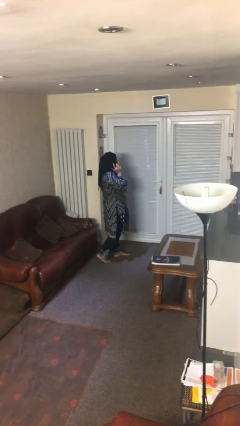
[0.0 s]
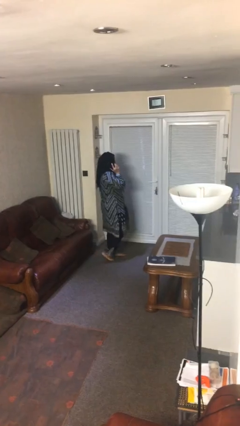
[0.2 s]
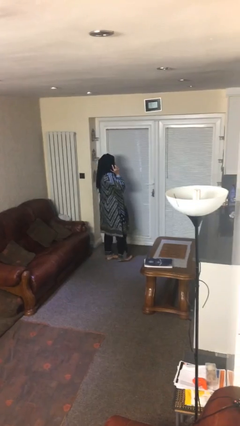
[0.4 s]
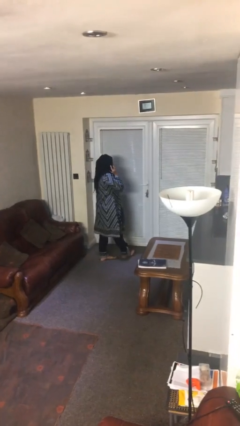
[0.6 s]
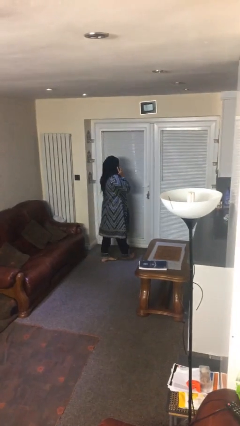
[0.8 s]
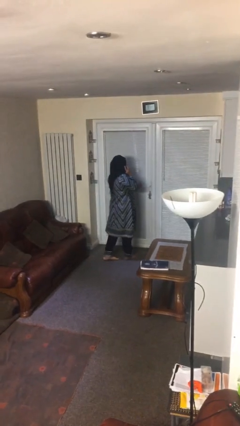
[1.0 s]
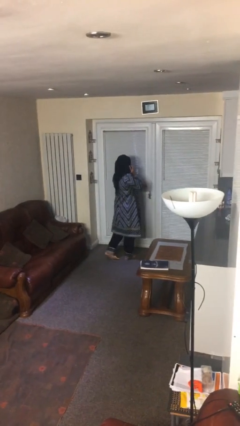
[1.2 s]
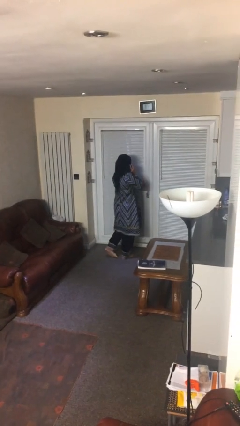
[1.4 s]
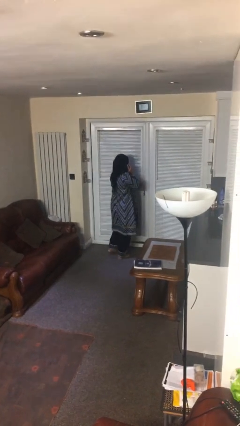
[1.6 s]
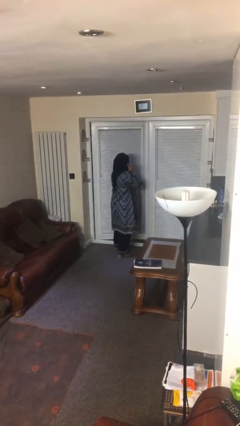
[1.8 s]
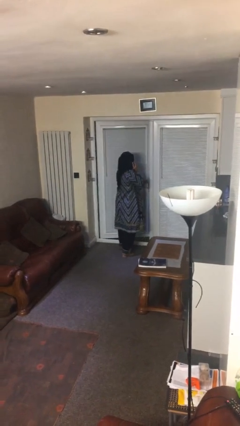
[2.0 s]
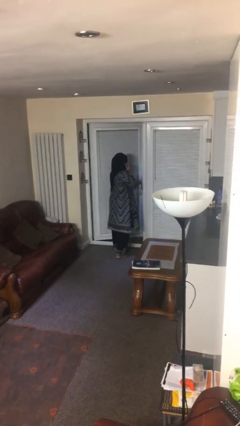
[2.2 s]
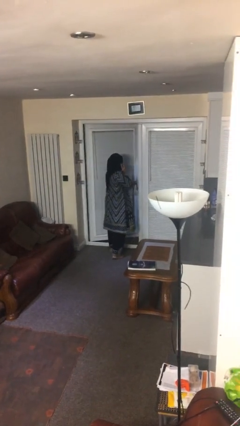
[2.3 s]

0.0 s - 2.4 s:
person opens facility door

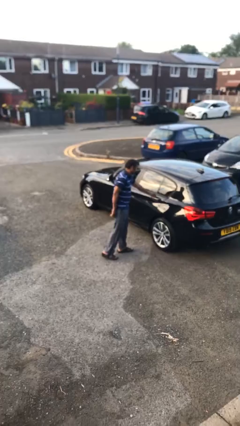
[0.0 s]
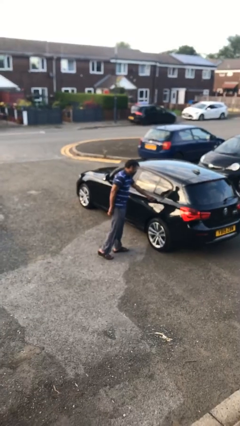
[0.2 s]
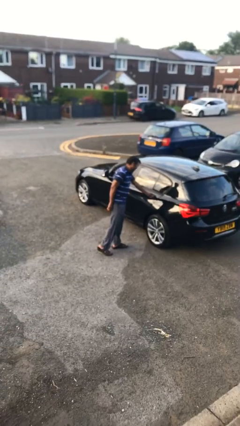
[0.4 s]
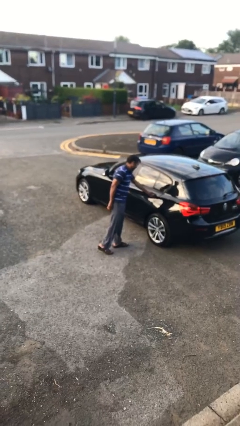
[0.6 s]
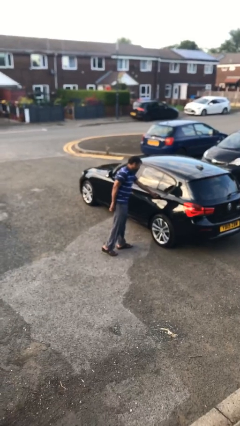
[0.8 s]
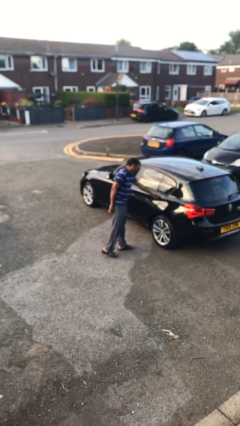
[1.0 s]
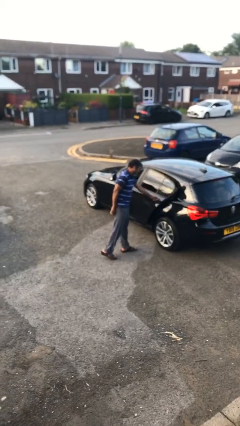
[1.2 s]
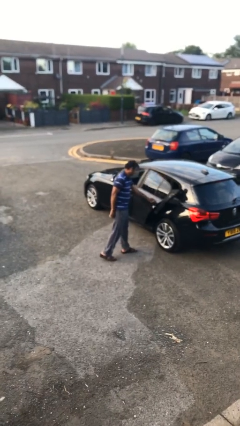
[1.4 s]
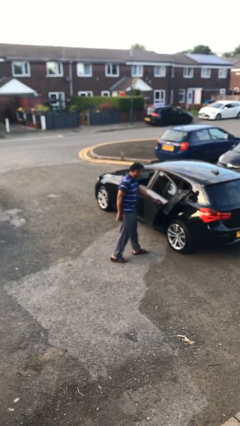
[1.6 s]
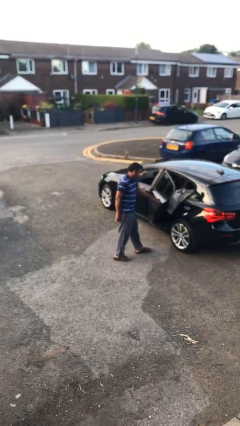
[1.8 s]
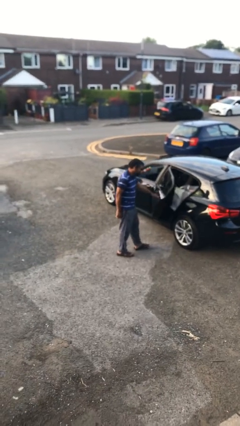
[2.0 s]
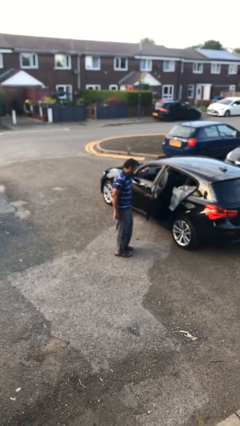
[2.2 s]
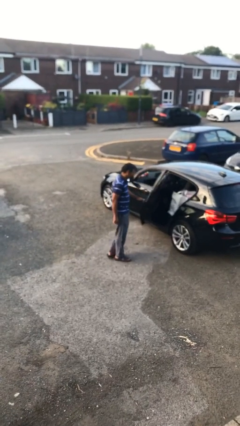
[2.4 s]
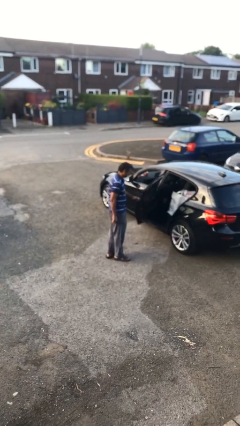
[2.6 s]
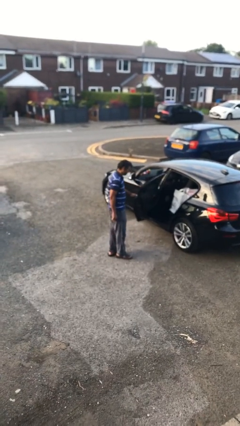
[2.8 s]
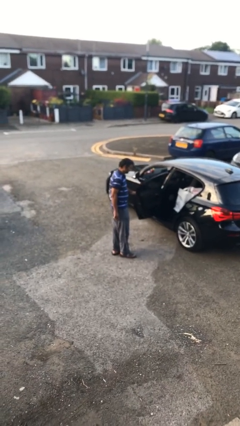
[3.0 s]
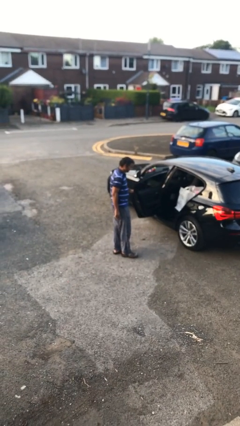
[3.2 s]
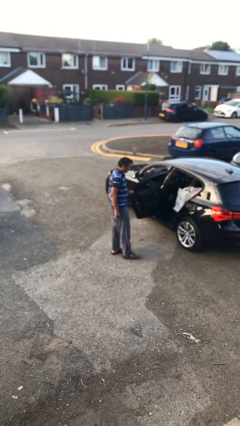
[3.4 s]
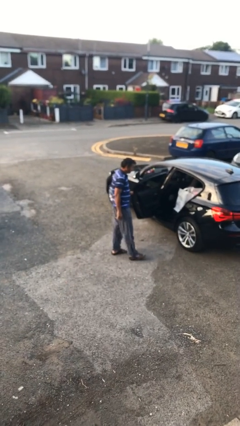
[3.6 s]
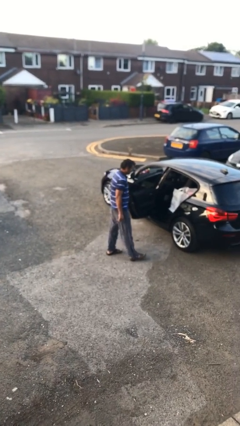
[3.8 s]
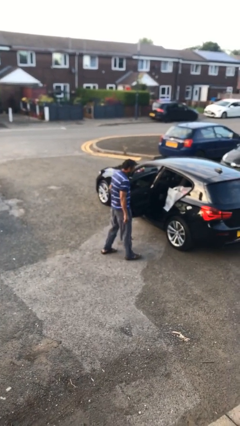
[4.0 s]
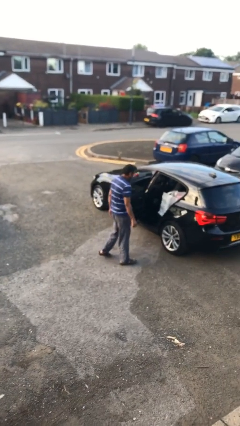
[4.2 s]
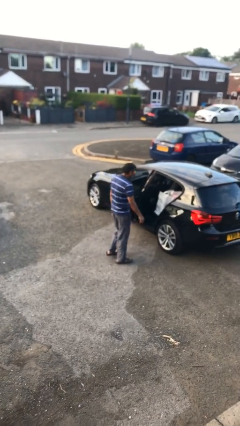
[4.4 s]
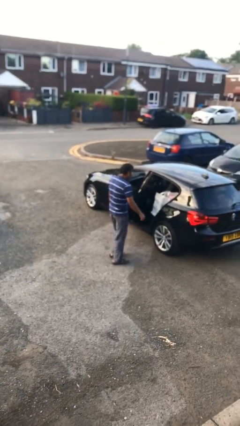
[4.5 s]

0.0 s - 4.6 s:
person opens car door

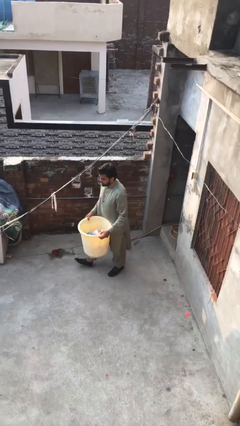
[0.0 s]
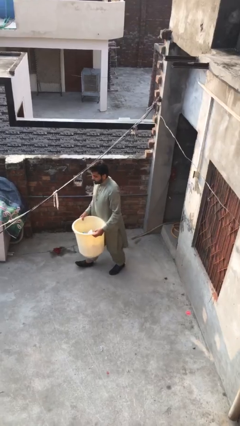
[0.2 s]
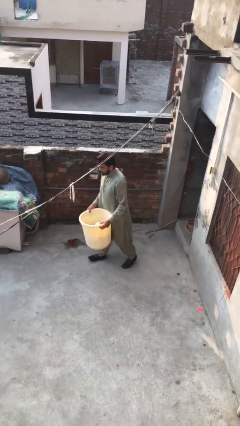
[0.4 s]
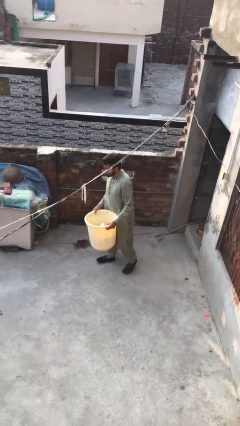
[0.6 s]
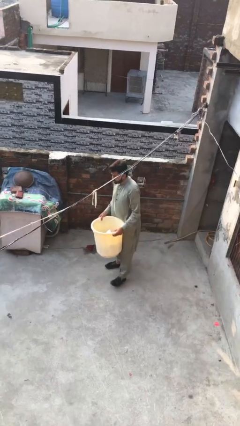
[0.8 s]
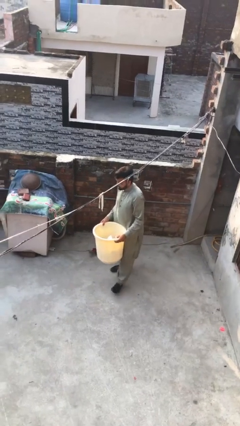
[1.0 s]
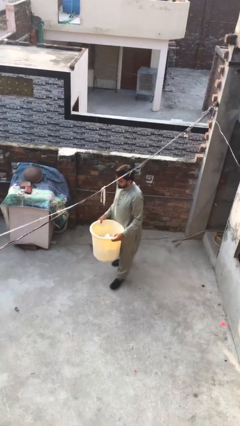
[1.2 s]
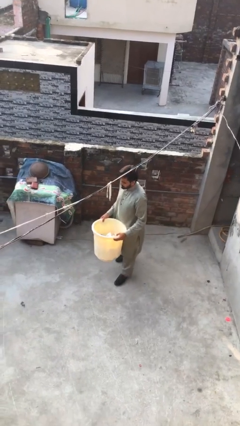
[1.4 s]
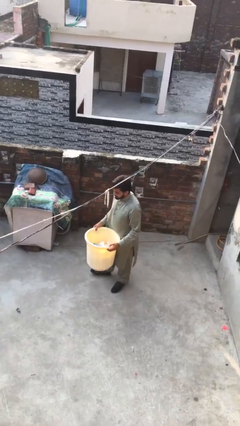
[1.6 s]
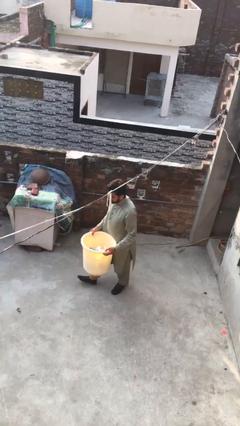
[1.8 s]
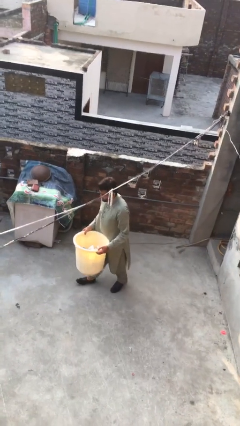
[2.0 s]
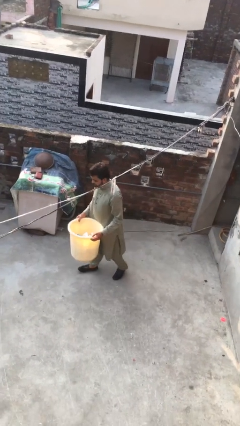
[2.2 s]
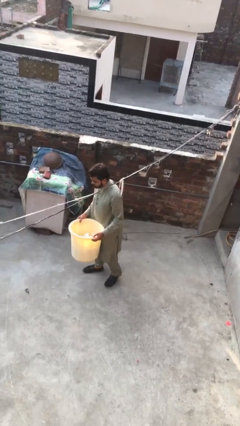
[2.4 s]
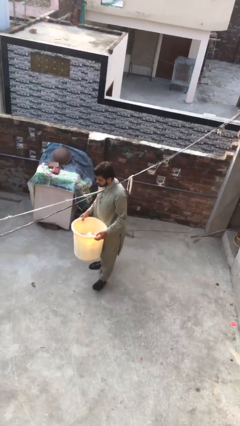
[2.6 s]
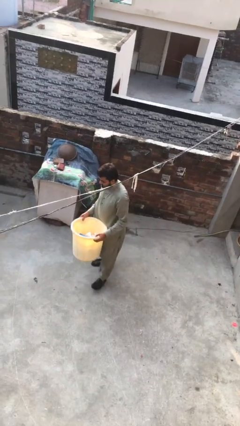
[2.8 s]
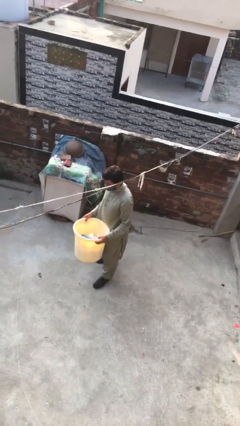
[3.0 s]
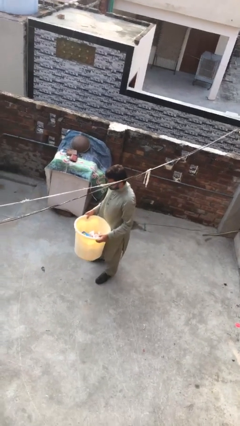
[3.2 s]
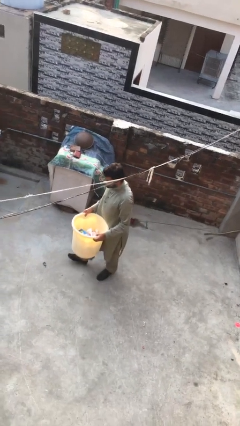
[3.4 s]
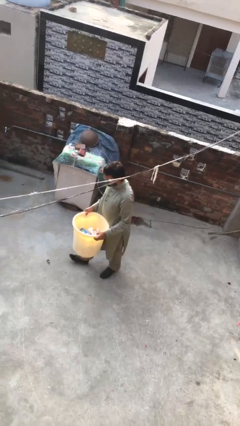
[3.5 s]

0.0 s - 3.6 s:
person carries heavy object

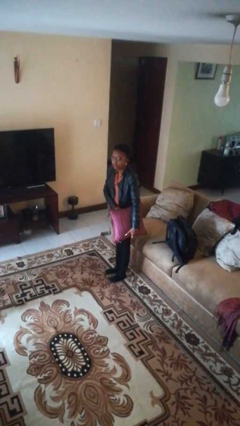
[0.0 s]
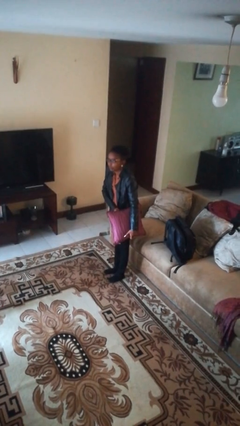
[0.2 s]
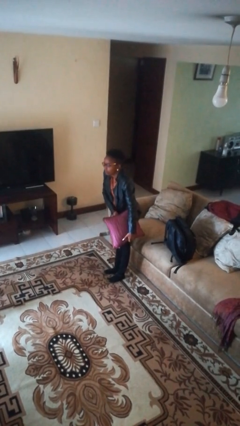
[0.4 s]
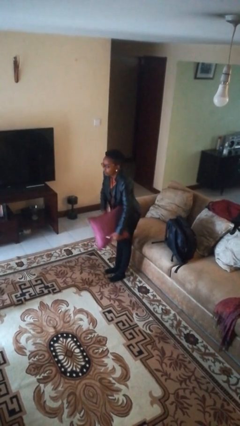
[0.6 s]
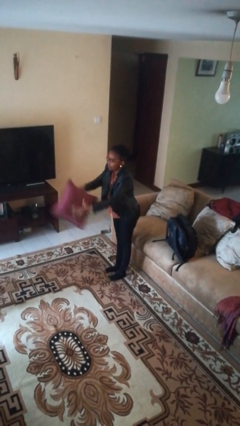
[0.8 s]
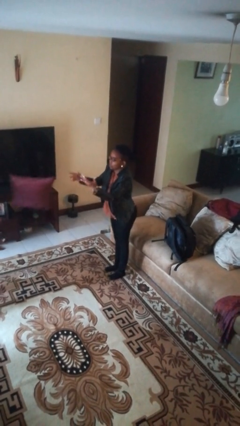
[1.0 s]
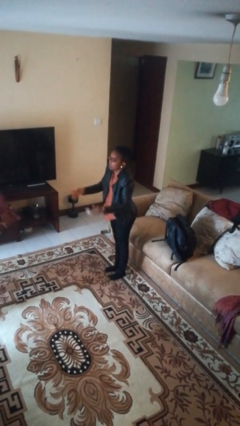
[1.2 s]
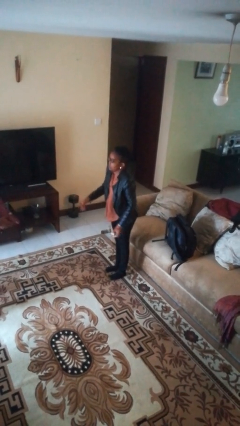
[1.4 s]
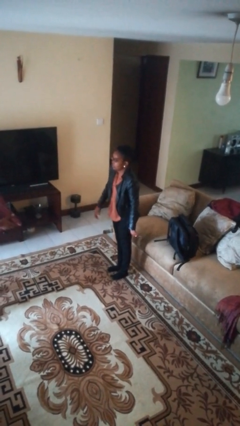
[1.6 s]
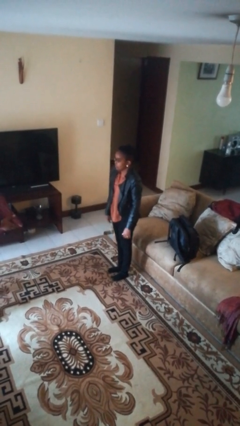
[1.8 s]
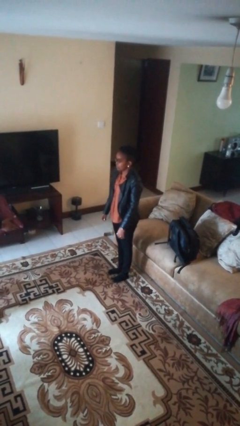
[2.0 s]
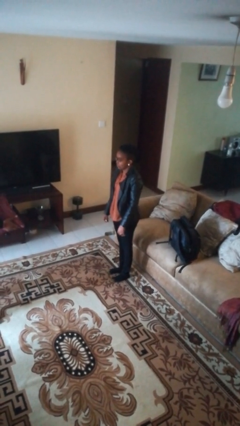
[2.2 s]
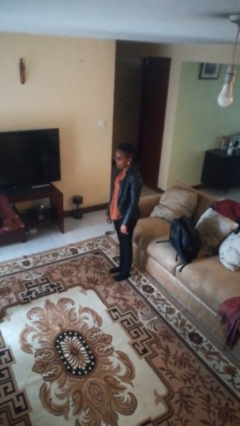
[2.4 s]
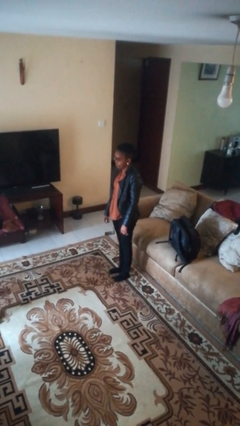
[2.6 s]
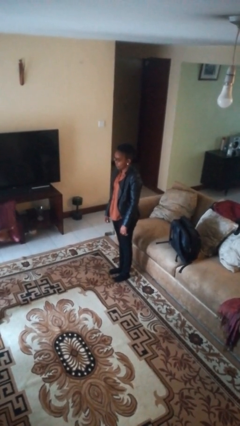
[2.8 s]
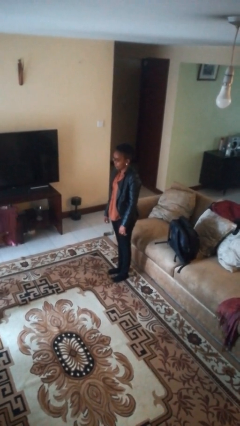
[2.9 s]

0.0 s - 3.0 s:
person throws object to person

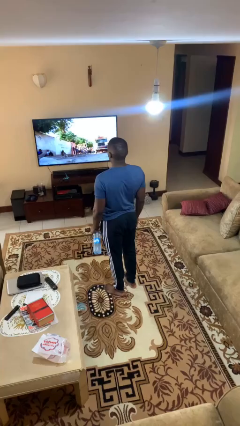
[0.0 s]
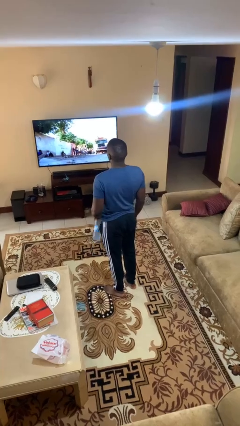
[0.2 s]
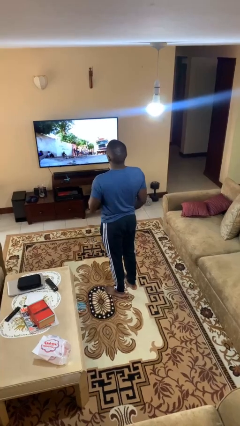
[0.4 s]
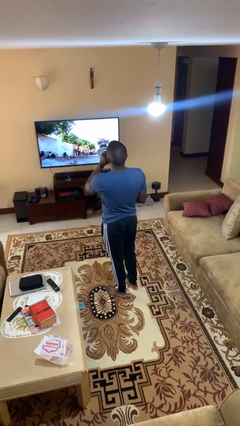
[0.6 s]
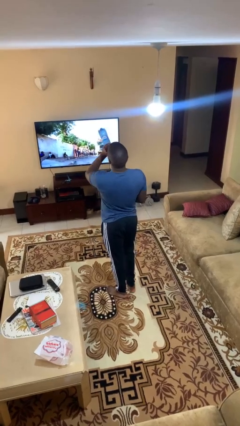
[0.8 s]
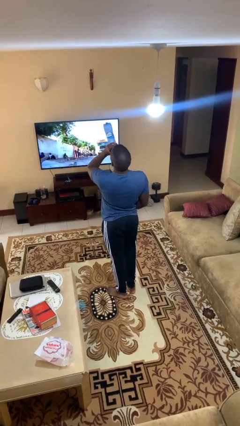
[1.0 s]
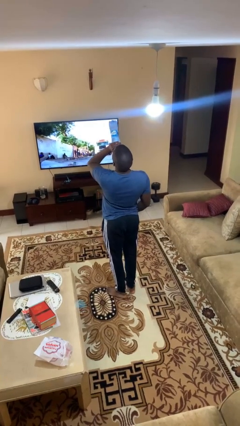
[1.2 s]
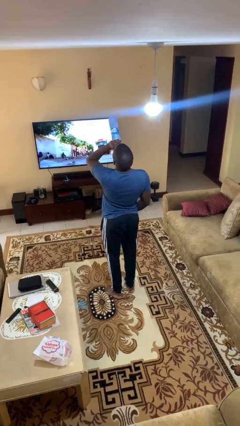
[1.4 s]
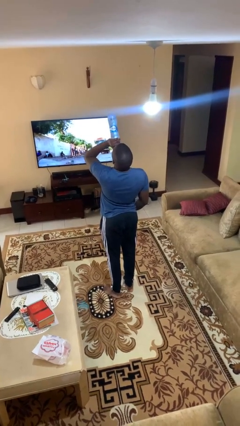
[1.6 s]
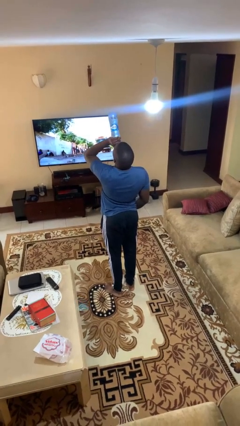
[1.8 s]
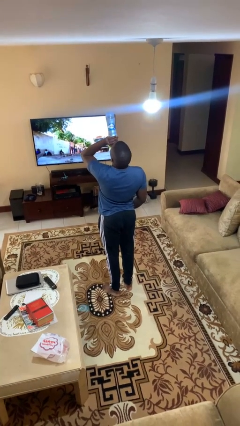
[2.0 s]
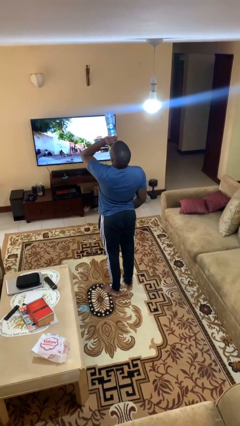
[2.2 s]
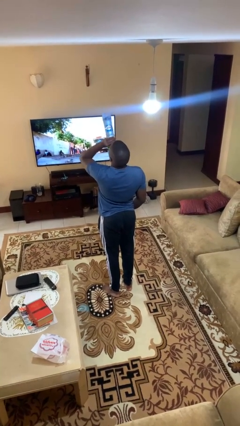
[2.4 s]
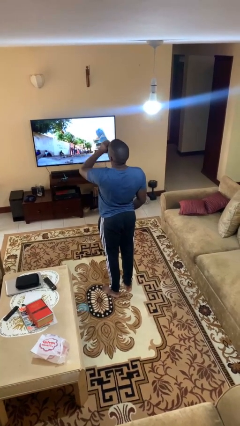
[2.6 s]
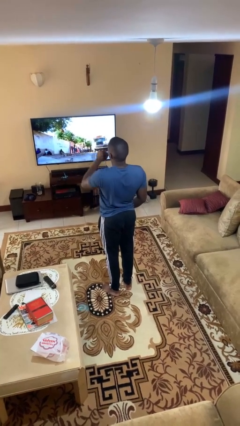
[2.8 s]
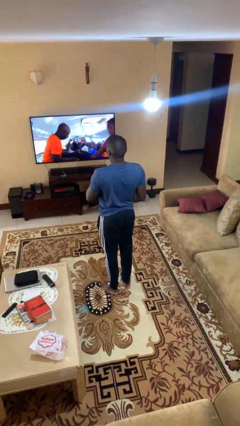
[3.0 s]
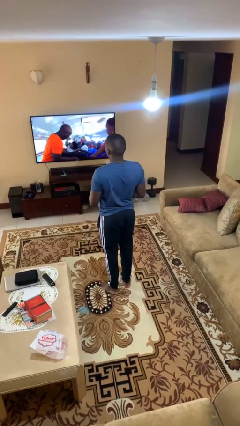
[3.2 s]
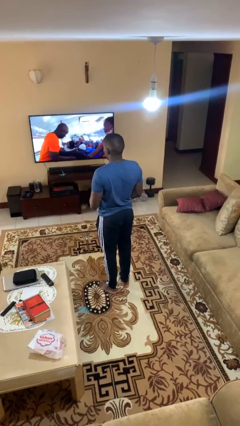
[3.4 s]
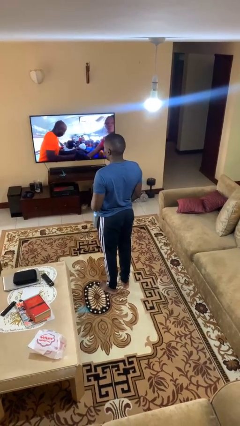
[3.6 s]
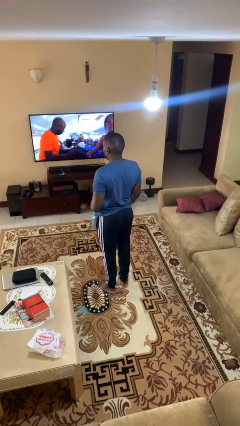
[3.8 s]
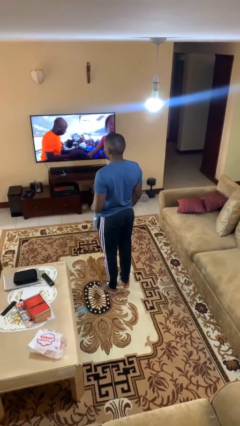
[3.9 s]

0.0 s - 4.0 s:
person drinks from bottle
